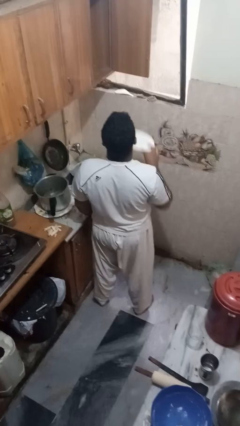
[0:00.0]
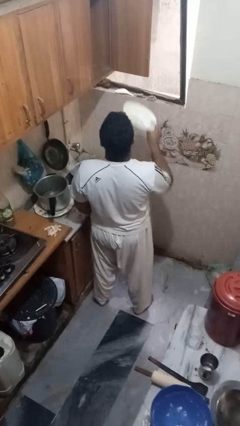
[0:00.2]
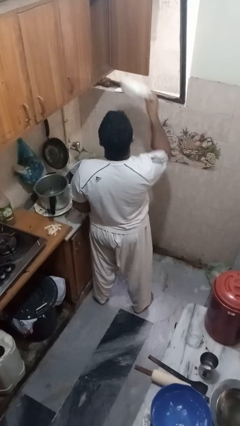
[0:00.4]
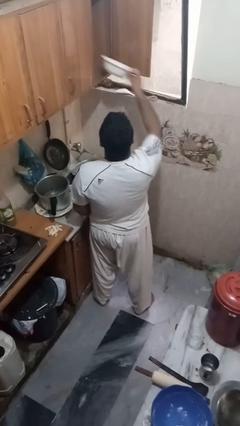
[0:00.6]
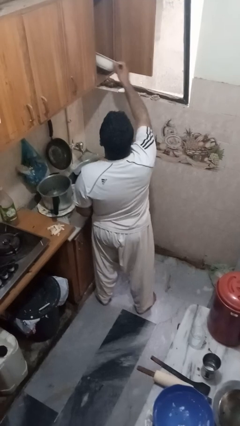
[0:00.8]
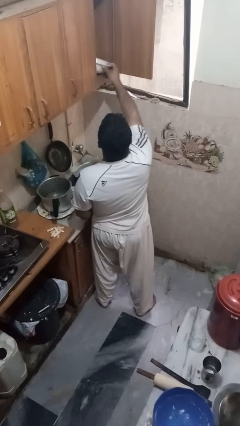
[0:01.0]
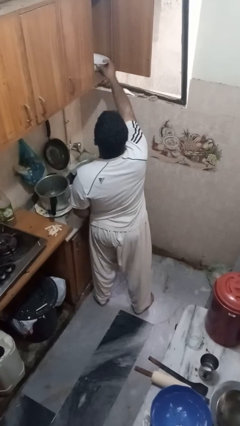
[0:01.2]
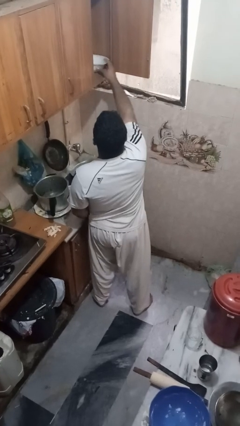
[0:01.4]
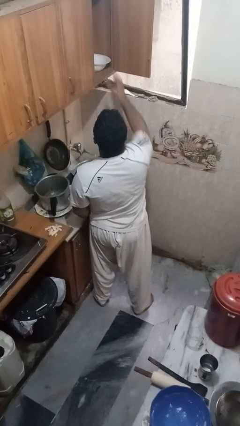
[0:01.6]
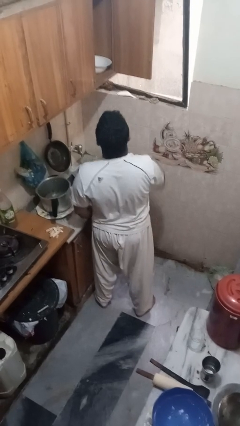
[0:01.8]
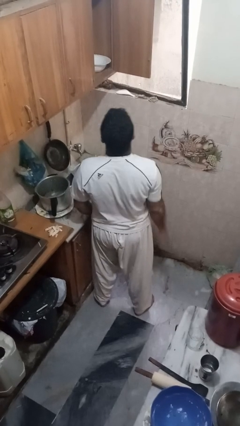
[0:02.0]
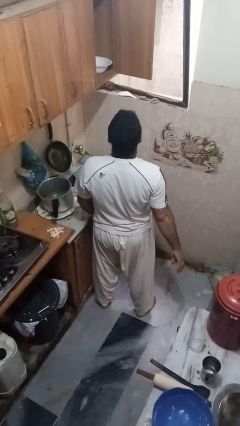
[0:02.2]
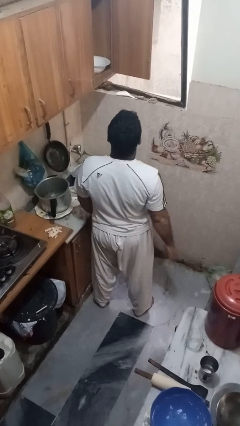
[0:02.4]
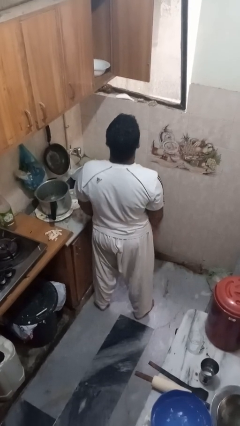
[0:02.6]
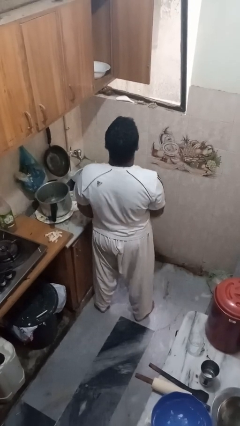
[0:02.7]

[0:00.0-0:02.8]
person puts object in cabinet

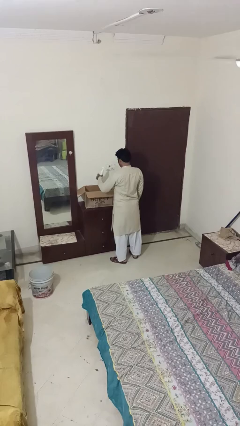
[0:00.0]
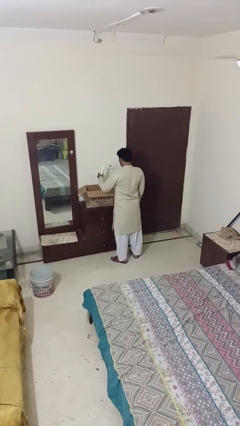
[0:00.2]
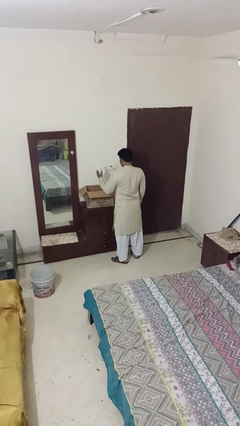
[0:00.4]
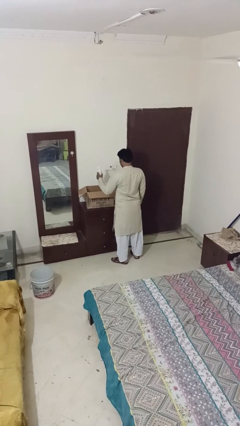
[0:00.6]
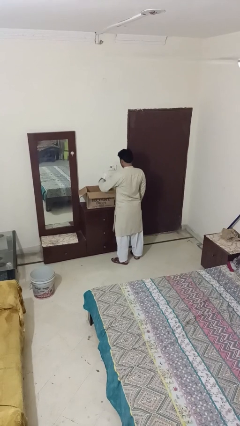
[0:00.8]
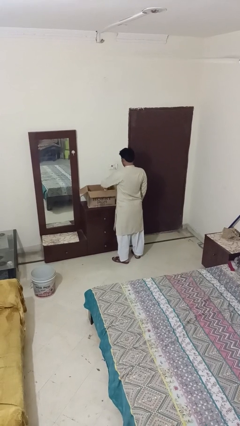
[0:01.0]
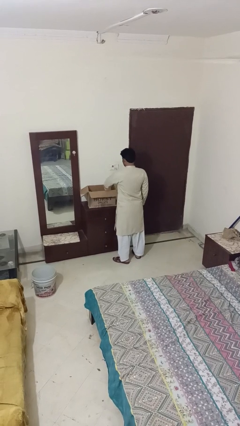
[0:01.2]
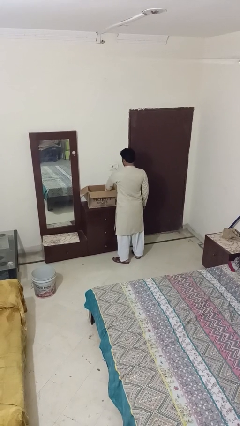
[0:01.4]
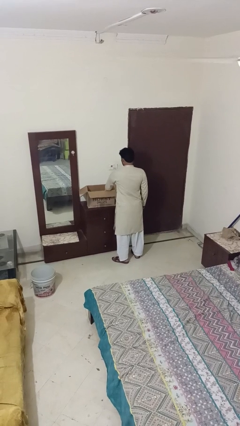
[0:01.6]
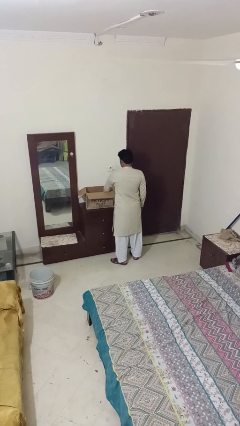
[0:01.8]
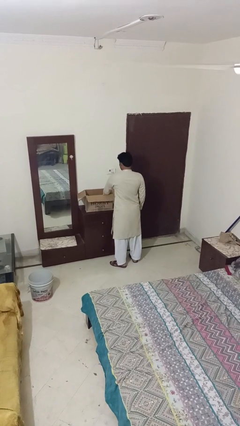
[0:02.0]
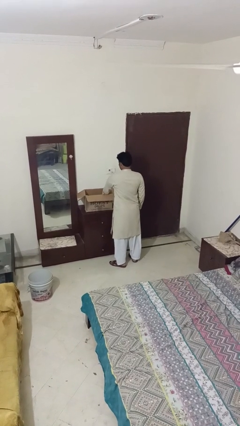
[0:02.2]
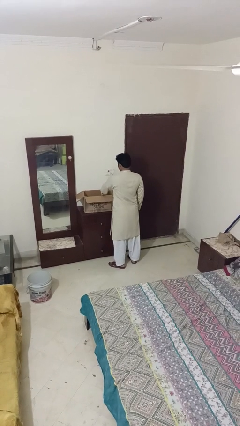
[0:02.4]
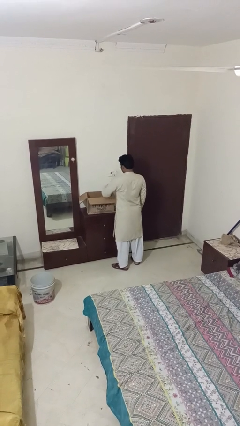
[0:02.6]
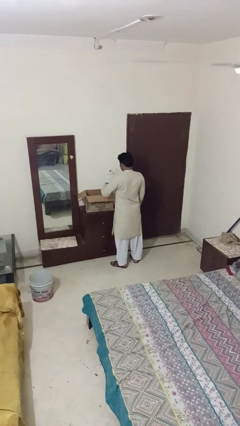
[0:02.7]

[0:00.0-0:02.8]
person puts object into box

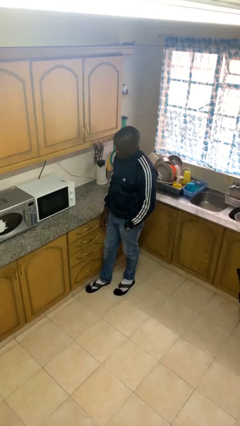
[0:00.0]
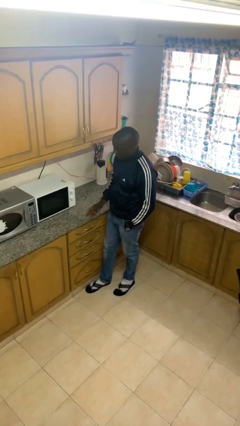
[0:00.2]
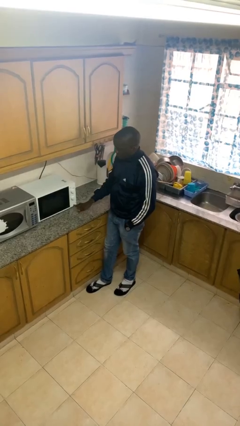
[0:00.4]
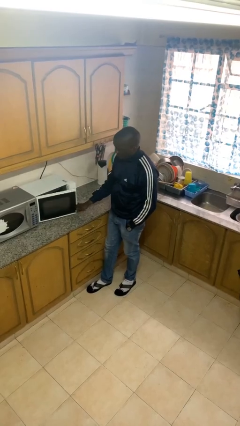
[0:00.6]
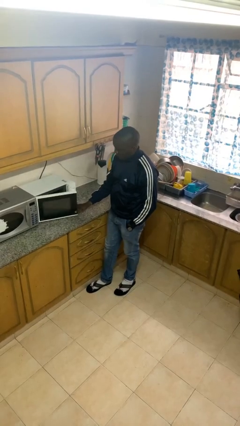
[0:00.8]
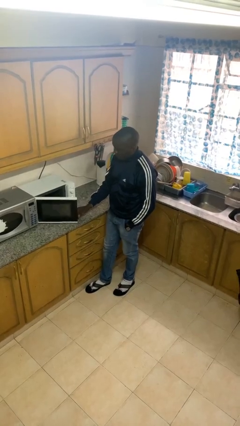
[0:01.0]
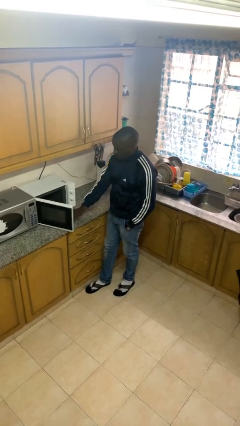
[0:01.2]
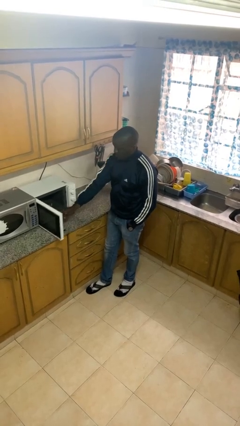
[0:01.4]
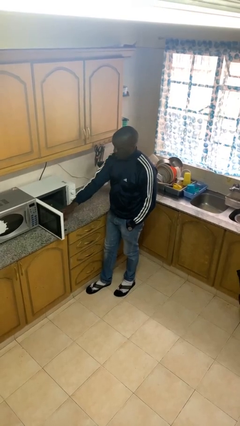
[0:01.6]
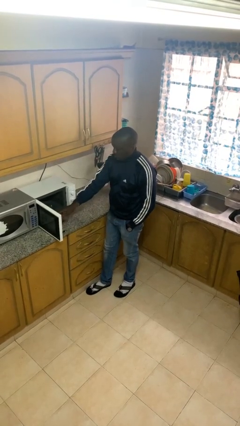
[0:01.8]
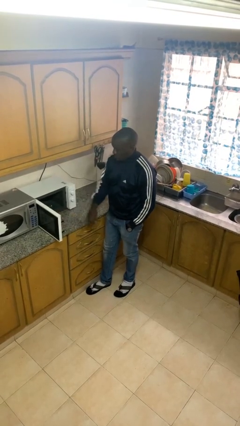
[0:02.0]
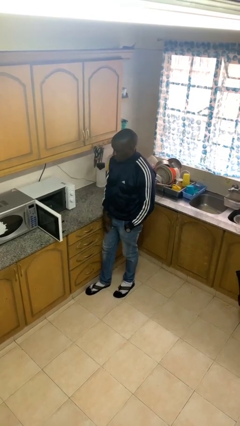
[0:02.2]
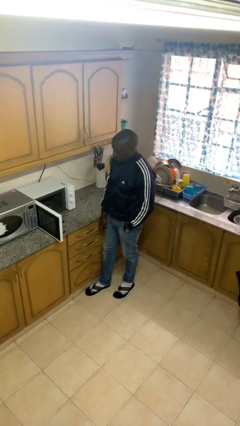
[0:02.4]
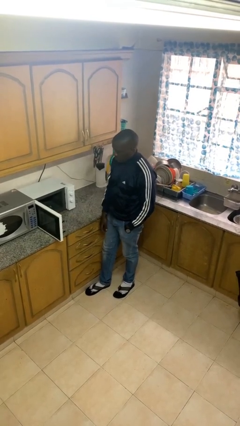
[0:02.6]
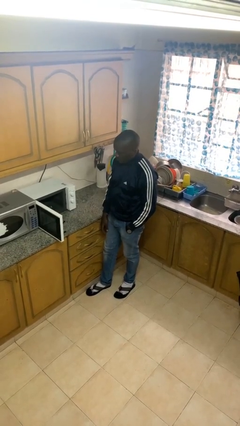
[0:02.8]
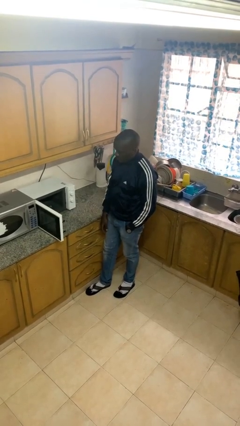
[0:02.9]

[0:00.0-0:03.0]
person opens microwave

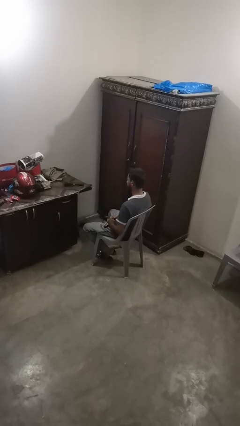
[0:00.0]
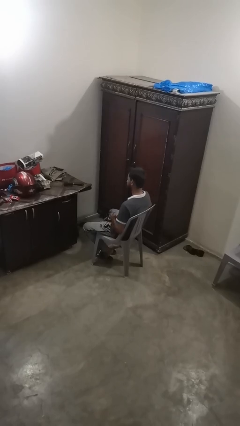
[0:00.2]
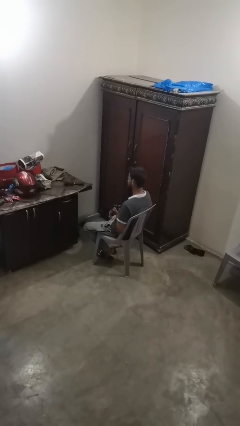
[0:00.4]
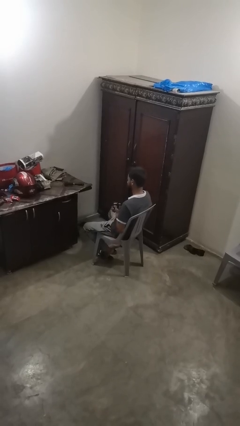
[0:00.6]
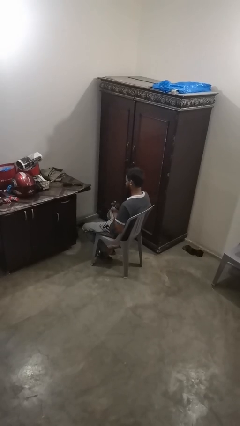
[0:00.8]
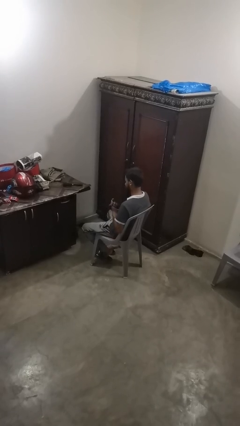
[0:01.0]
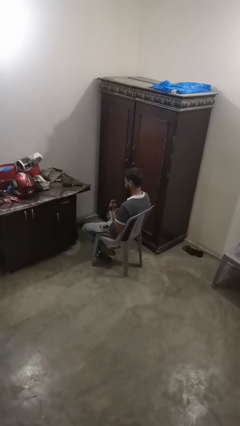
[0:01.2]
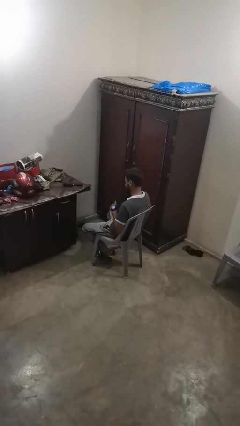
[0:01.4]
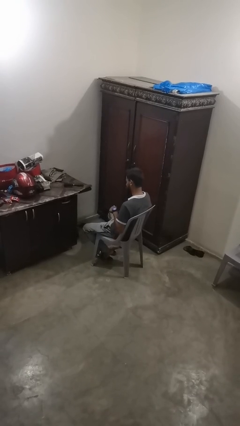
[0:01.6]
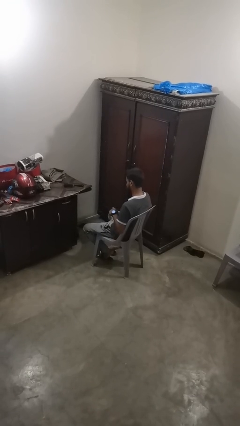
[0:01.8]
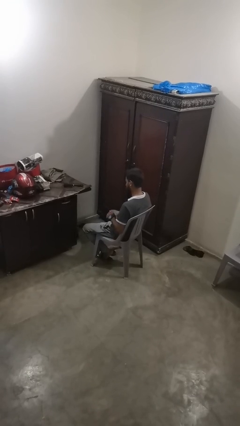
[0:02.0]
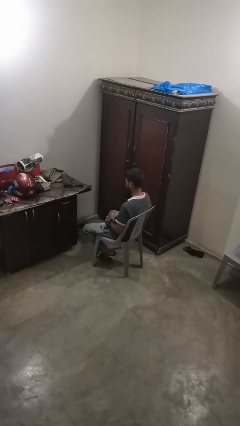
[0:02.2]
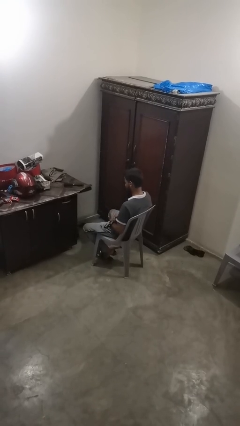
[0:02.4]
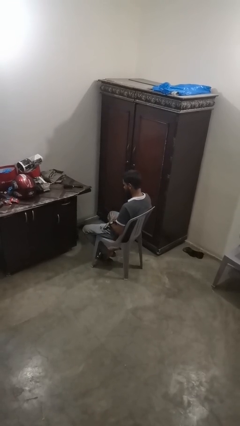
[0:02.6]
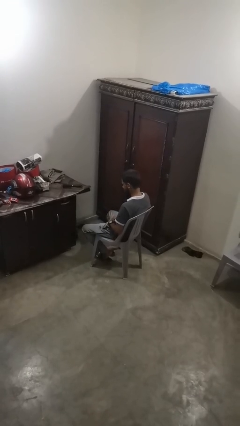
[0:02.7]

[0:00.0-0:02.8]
person puts on wristwatch

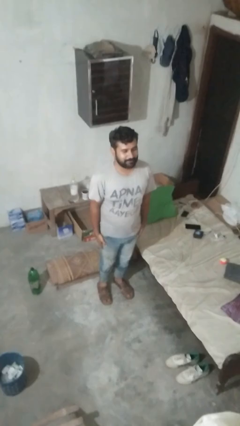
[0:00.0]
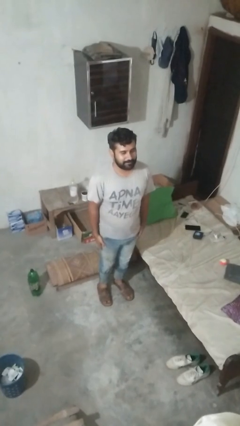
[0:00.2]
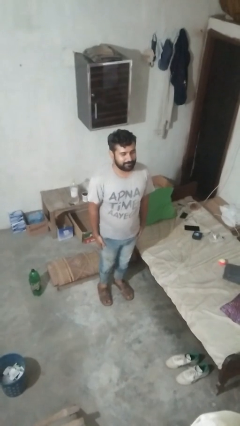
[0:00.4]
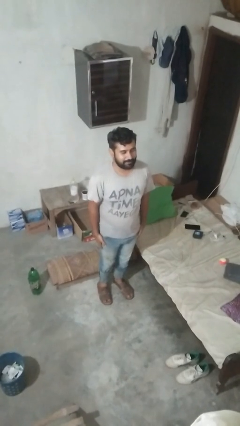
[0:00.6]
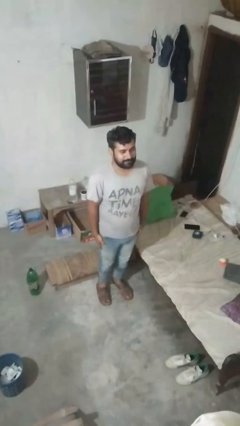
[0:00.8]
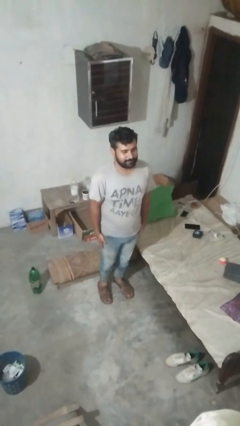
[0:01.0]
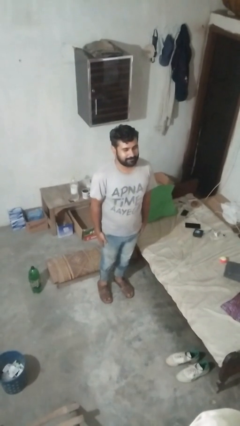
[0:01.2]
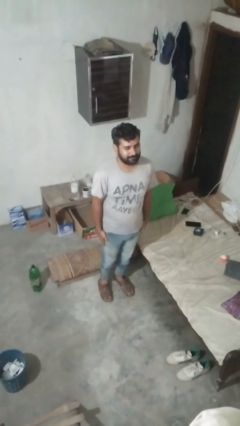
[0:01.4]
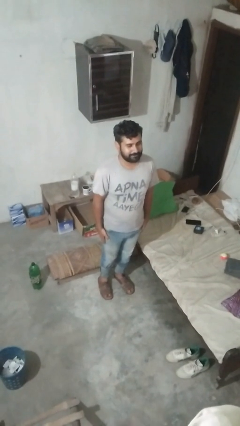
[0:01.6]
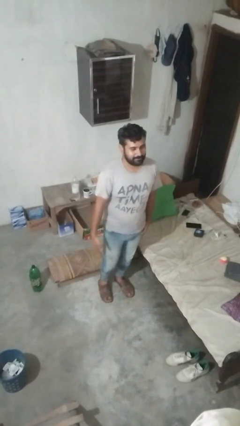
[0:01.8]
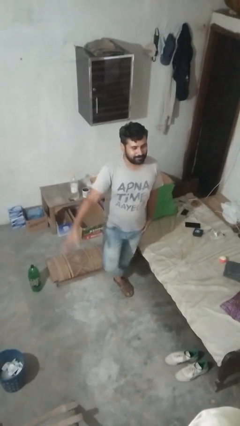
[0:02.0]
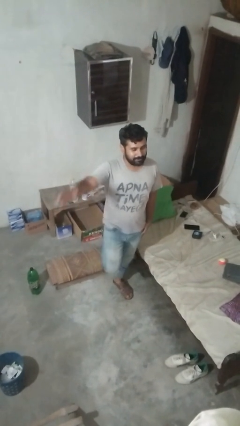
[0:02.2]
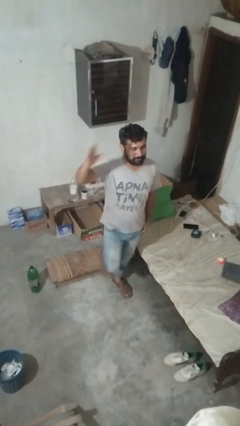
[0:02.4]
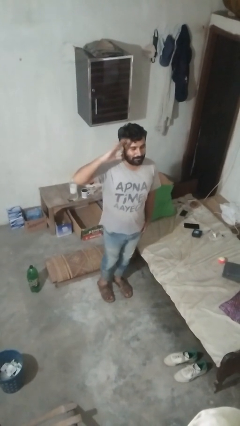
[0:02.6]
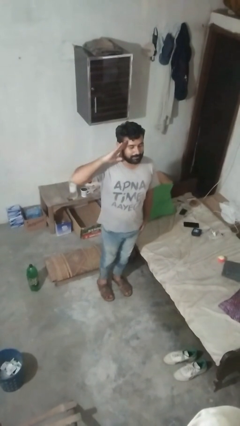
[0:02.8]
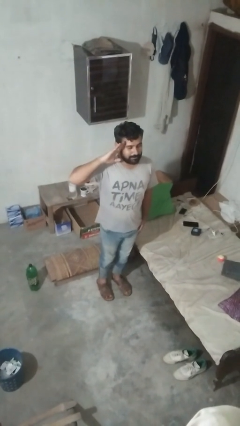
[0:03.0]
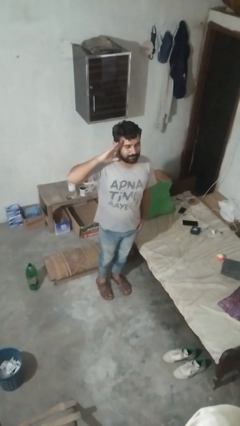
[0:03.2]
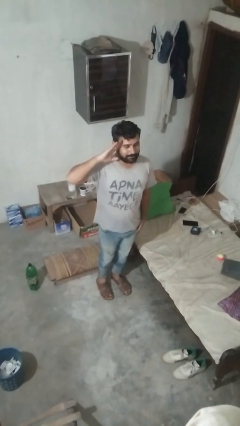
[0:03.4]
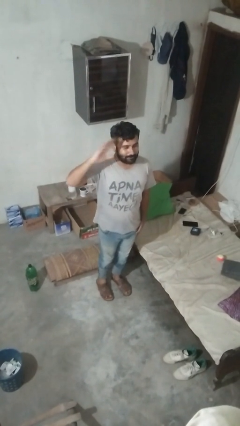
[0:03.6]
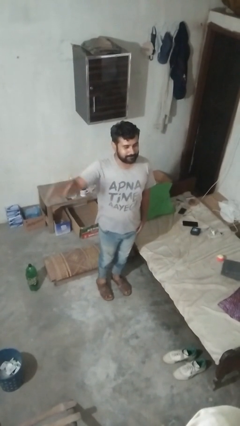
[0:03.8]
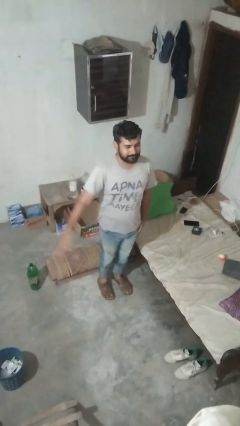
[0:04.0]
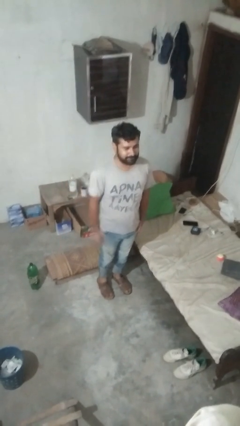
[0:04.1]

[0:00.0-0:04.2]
person salutes

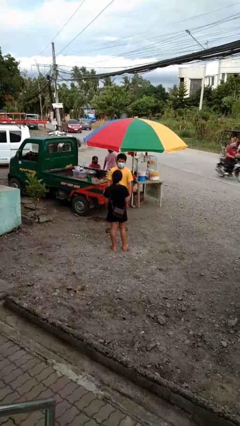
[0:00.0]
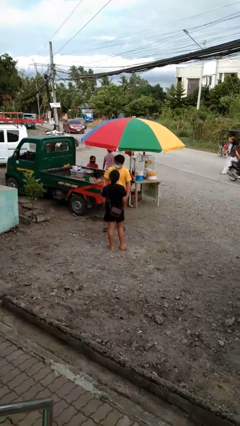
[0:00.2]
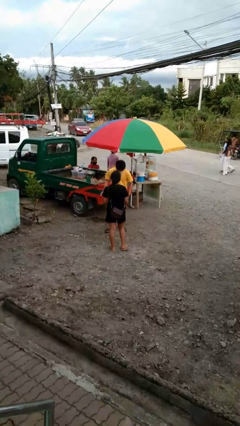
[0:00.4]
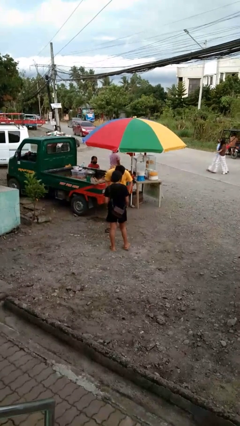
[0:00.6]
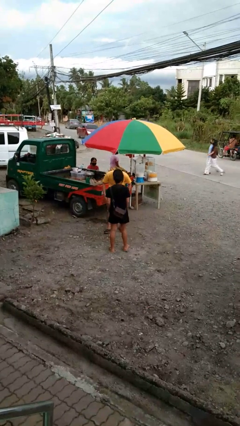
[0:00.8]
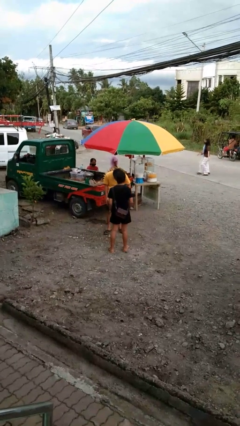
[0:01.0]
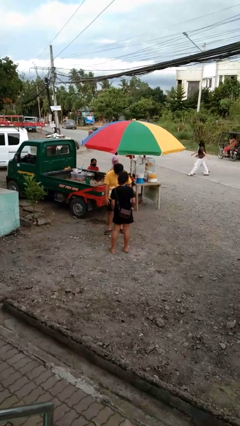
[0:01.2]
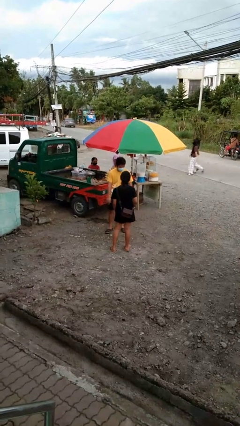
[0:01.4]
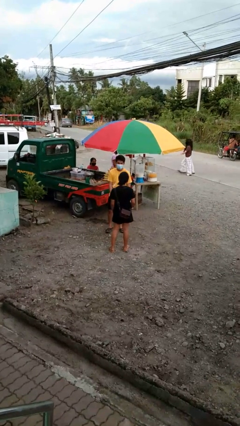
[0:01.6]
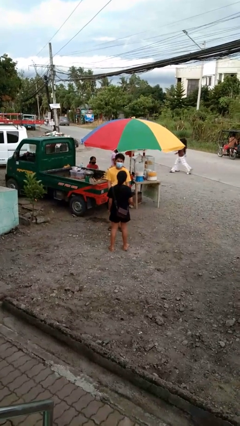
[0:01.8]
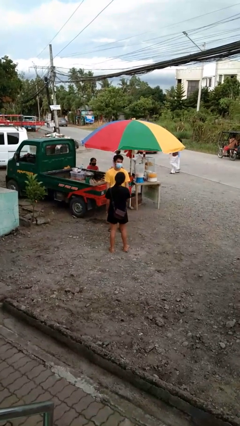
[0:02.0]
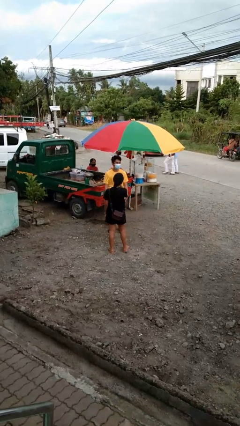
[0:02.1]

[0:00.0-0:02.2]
person laughs with person
